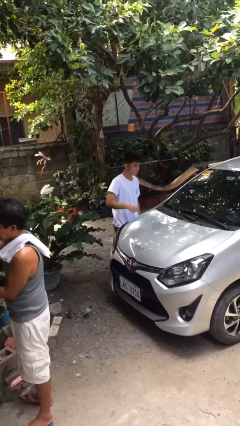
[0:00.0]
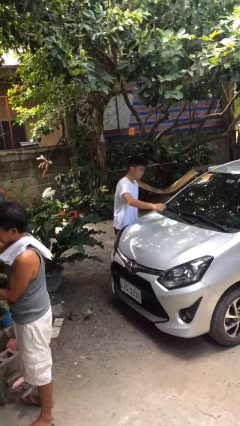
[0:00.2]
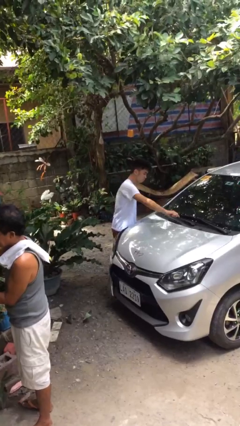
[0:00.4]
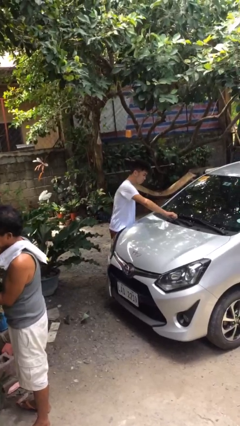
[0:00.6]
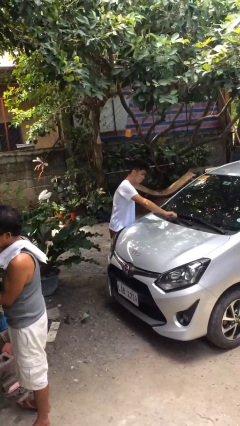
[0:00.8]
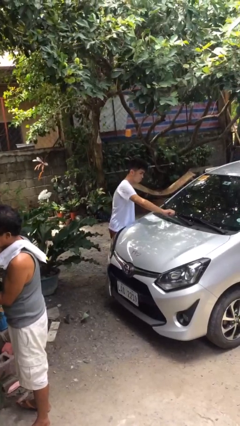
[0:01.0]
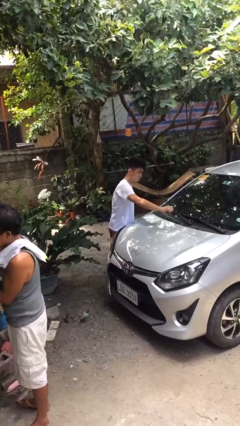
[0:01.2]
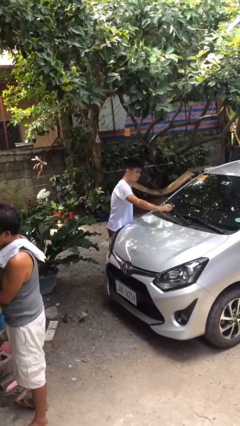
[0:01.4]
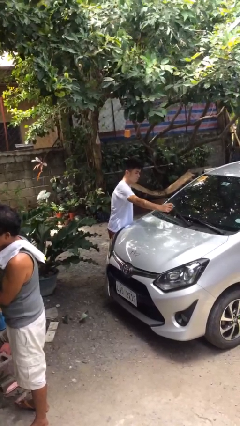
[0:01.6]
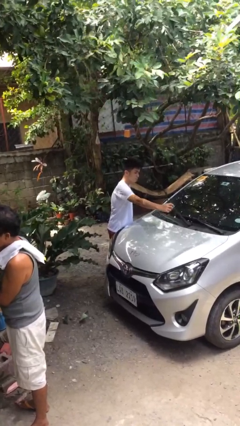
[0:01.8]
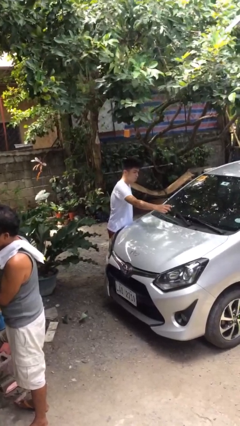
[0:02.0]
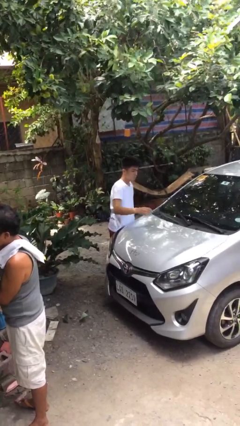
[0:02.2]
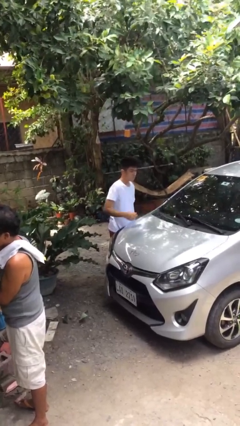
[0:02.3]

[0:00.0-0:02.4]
person flips up car wipers

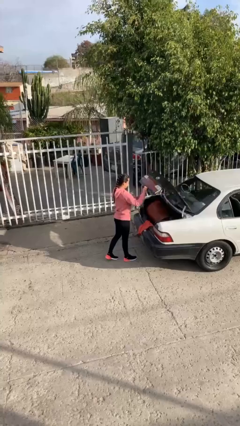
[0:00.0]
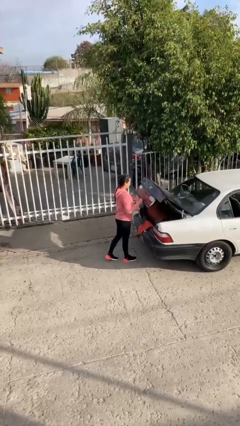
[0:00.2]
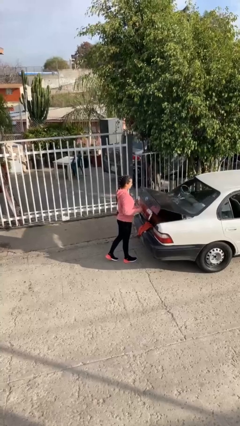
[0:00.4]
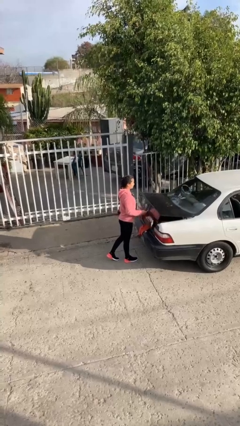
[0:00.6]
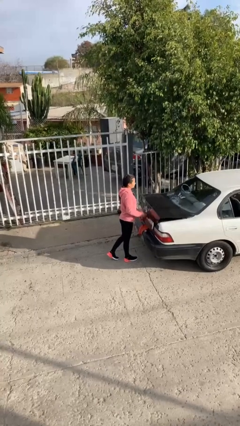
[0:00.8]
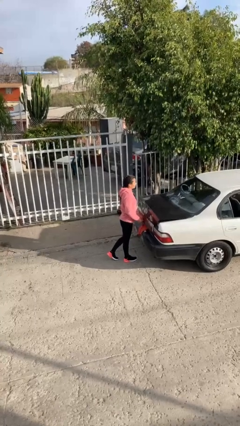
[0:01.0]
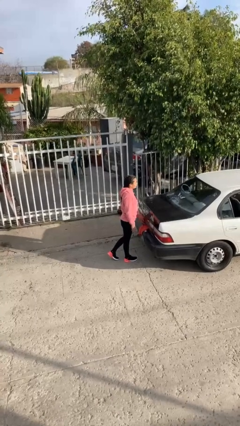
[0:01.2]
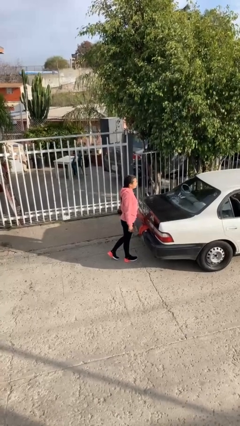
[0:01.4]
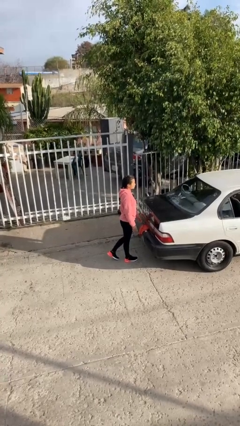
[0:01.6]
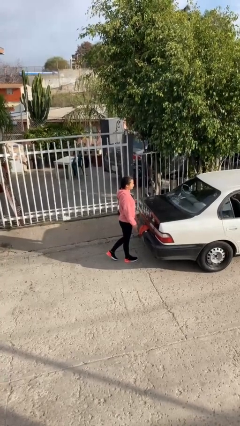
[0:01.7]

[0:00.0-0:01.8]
person closes car trunk

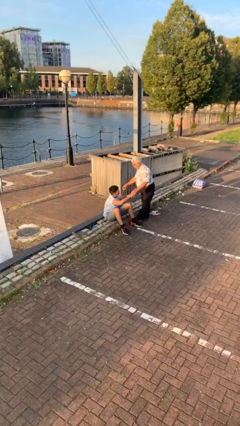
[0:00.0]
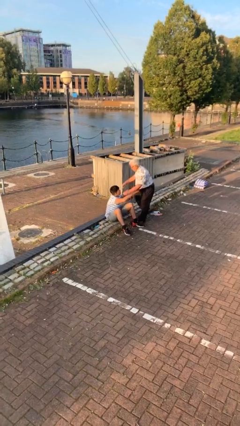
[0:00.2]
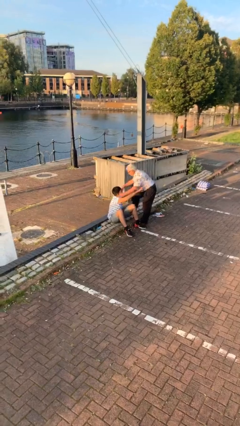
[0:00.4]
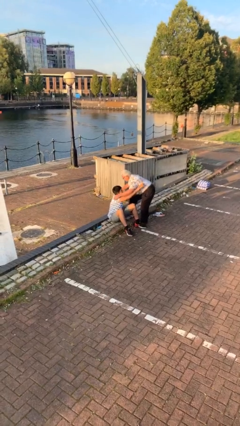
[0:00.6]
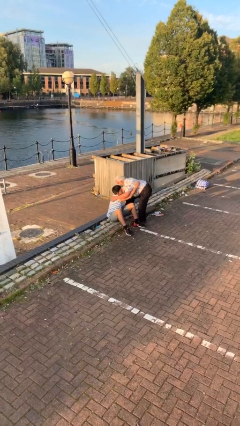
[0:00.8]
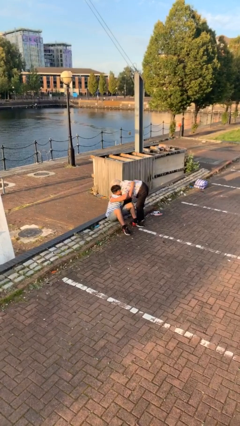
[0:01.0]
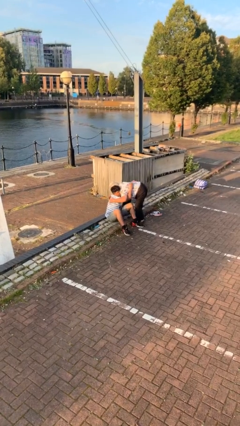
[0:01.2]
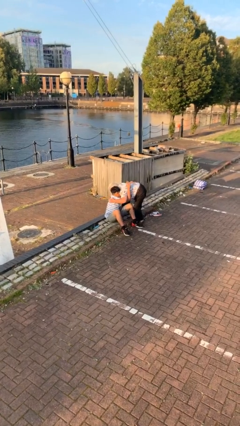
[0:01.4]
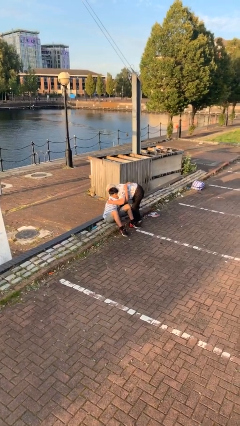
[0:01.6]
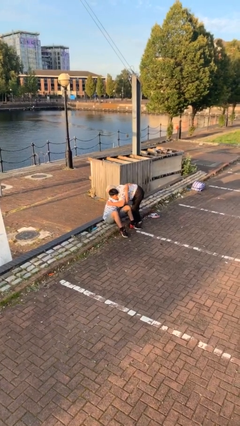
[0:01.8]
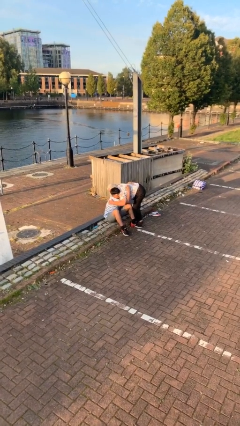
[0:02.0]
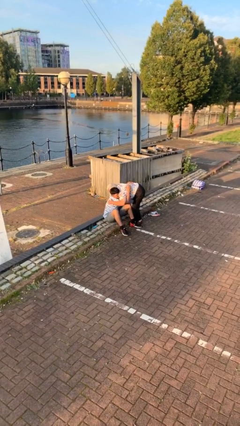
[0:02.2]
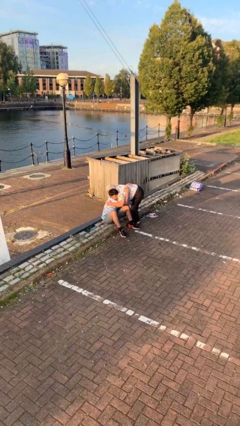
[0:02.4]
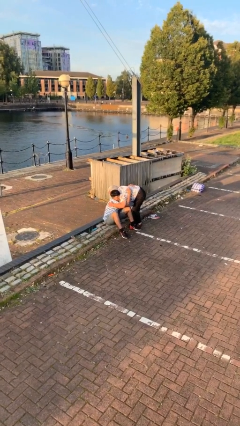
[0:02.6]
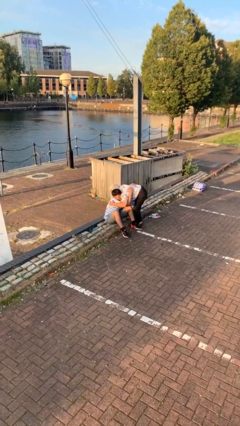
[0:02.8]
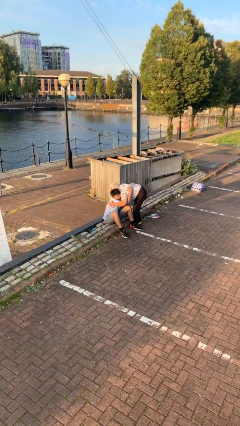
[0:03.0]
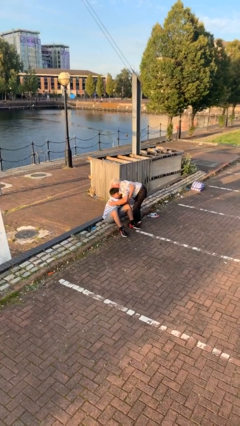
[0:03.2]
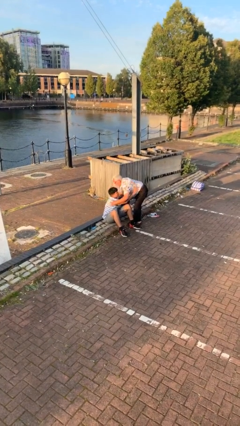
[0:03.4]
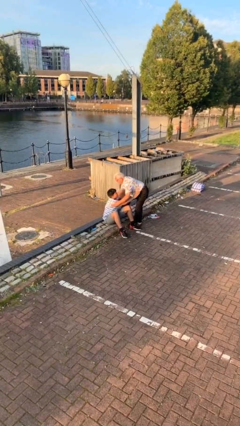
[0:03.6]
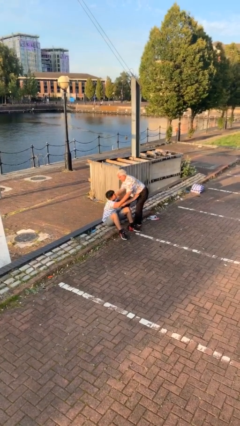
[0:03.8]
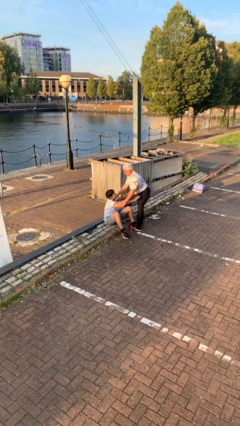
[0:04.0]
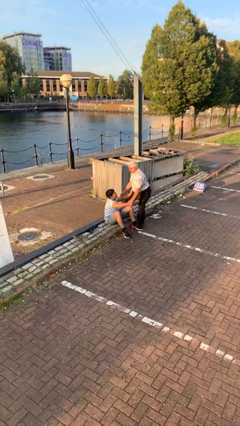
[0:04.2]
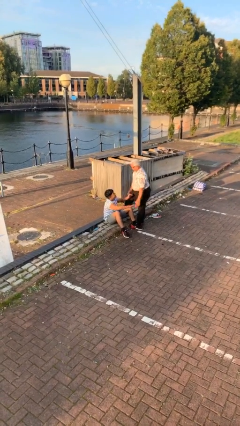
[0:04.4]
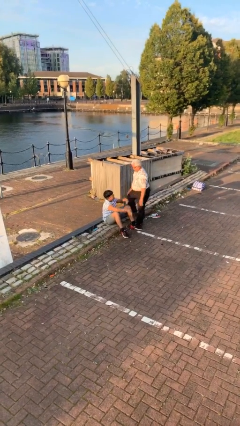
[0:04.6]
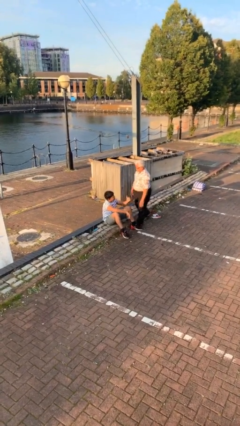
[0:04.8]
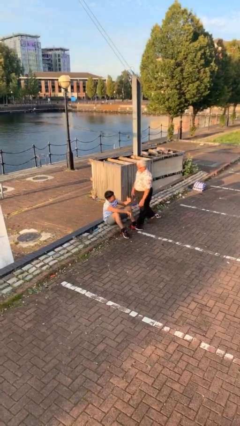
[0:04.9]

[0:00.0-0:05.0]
person embraces person

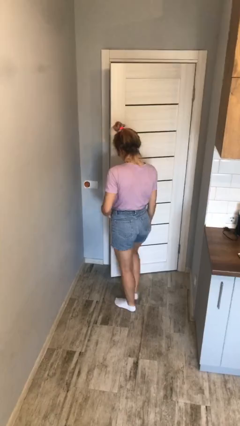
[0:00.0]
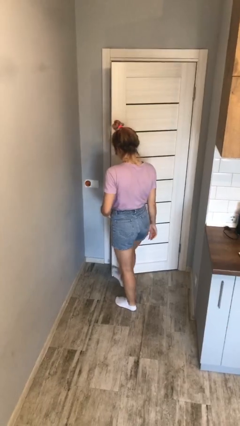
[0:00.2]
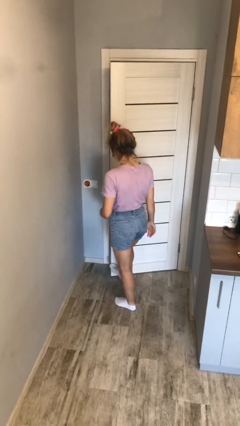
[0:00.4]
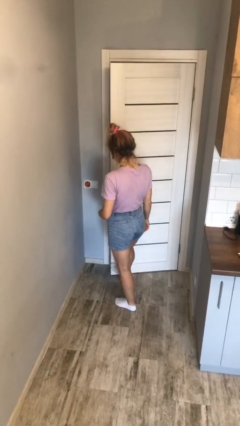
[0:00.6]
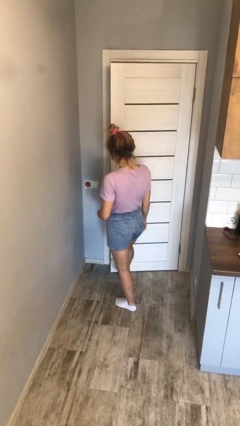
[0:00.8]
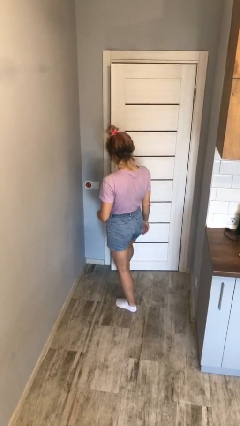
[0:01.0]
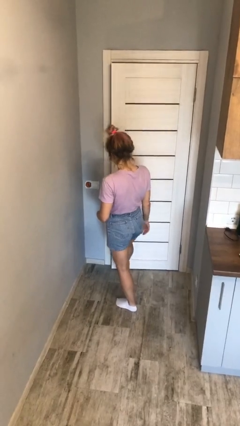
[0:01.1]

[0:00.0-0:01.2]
person closes door with foot

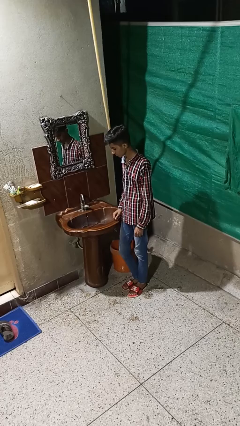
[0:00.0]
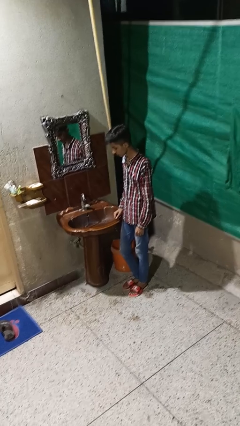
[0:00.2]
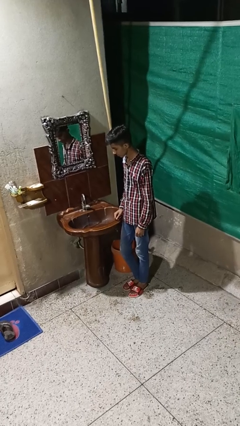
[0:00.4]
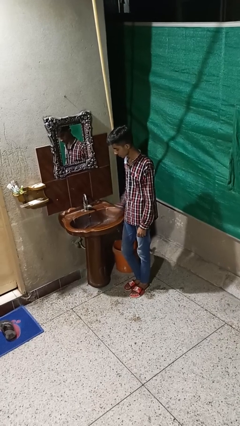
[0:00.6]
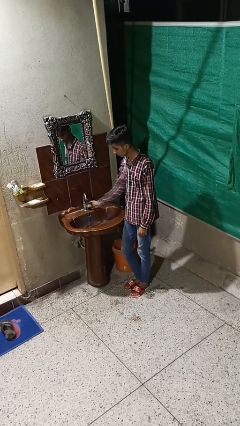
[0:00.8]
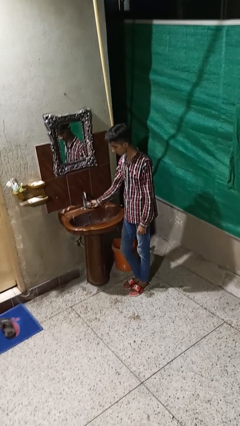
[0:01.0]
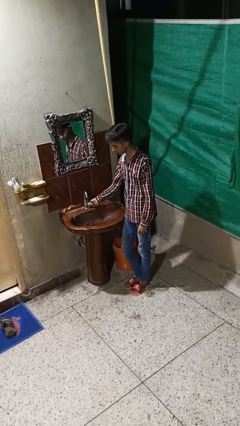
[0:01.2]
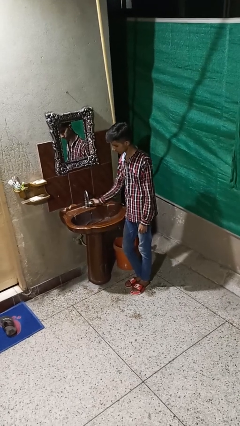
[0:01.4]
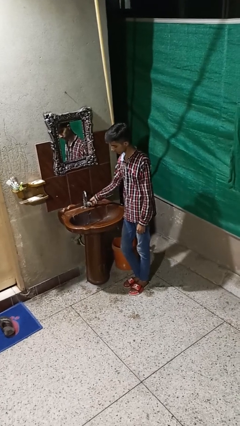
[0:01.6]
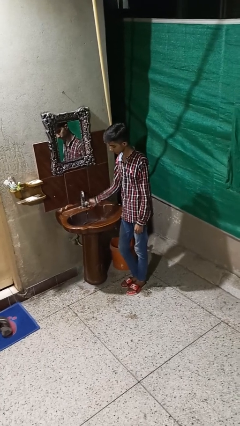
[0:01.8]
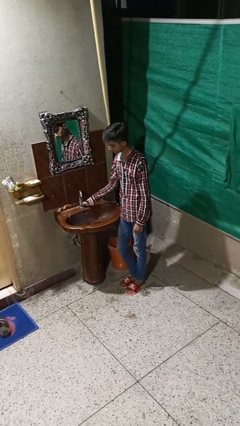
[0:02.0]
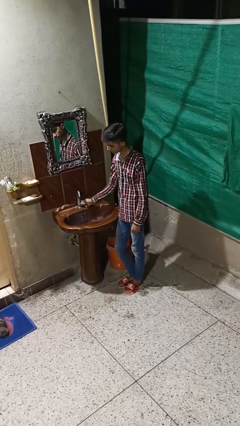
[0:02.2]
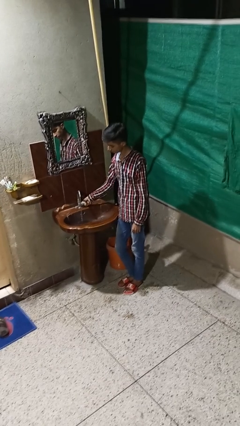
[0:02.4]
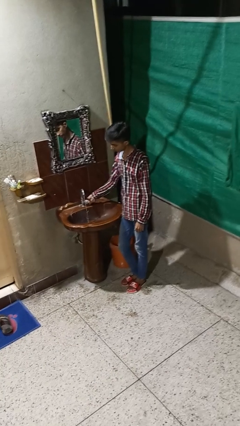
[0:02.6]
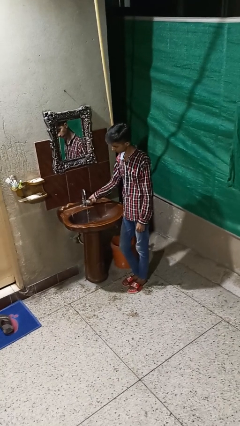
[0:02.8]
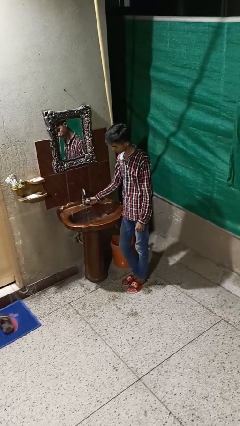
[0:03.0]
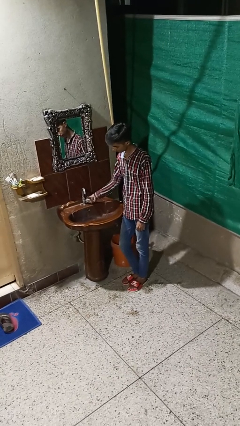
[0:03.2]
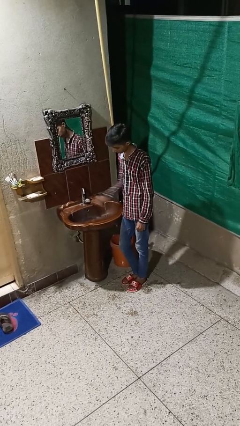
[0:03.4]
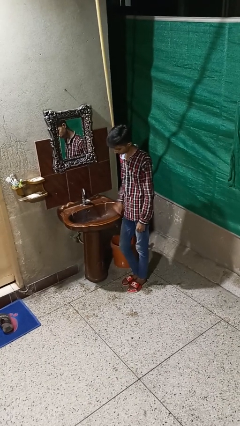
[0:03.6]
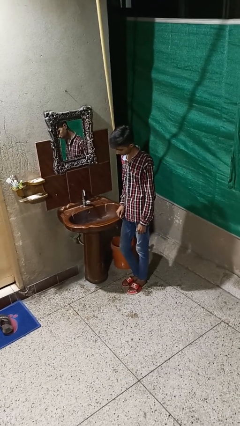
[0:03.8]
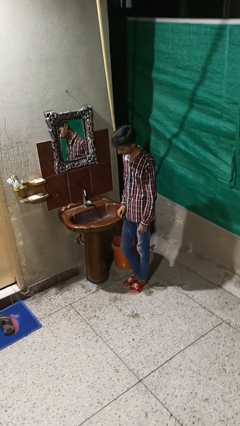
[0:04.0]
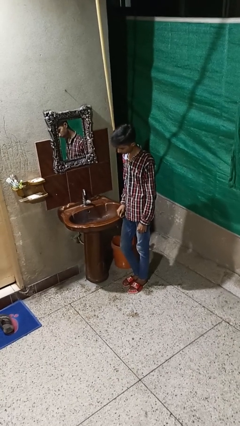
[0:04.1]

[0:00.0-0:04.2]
person turns off faucet

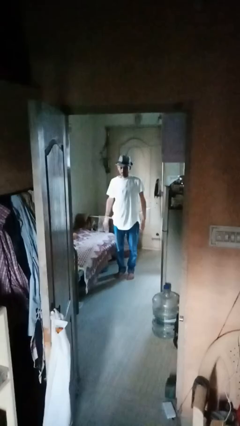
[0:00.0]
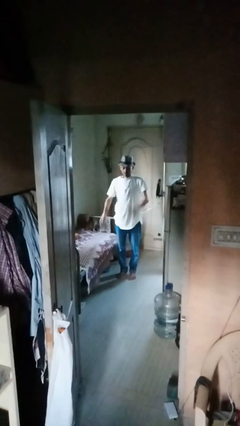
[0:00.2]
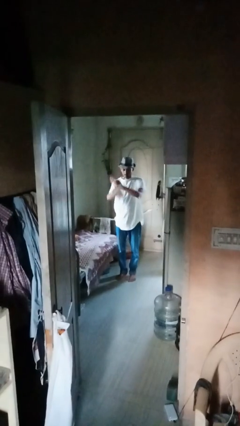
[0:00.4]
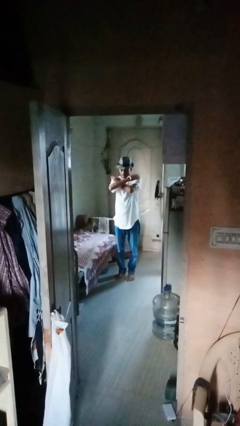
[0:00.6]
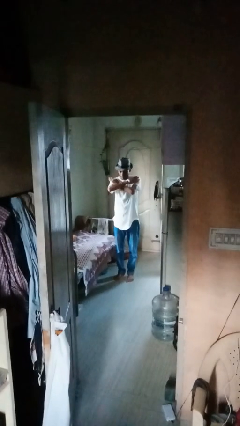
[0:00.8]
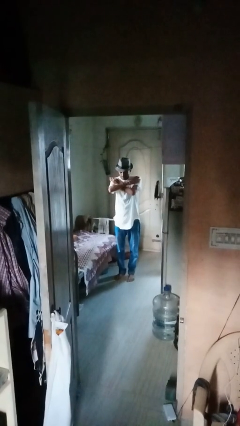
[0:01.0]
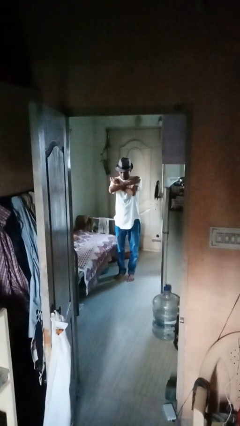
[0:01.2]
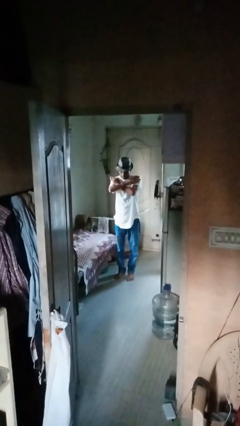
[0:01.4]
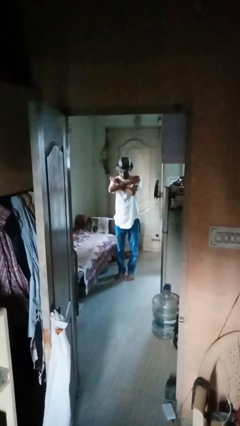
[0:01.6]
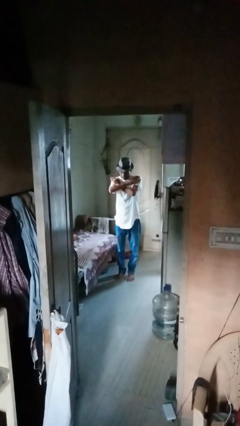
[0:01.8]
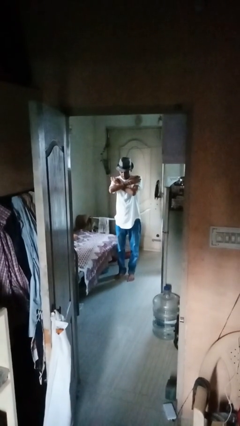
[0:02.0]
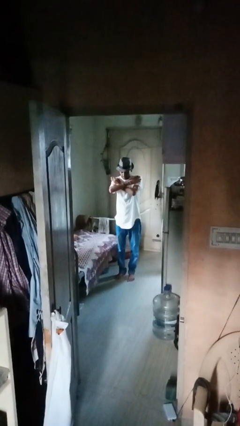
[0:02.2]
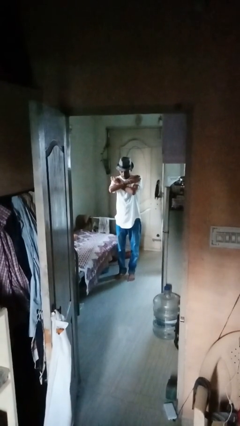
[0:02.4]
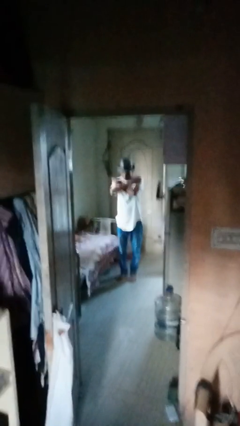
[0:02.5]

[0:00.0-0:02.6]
person gestures arms x

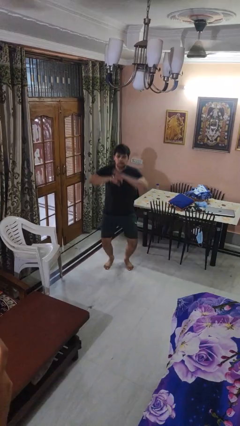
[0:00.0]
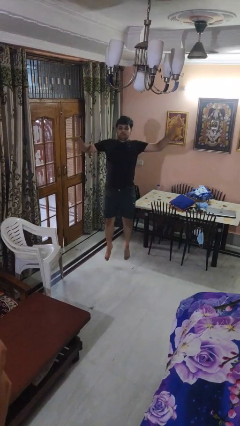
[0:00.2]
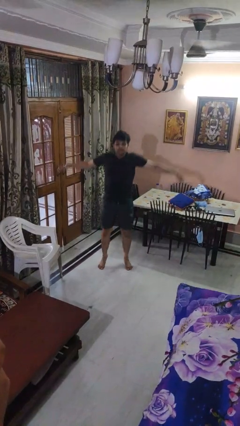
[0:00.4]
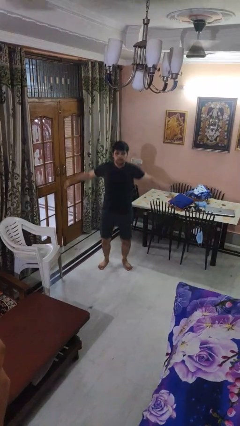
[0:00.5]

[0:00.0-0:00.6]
person jumps
